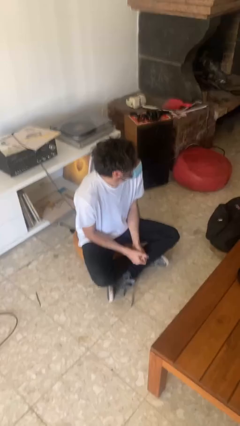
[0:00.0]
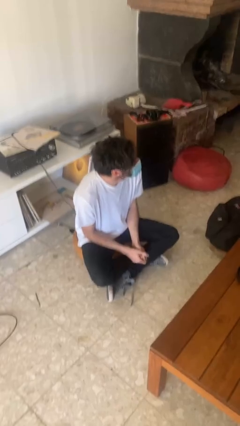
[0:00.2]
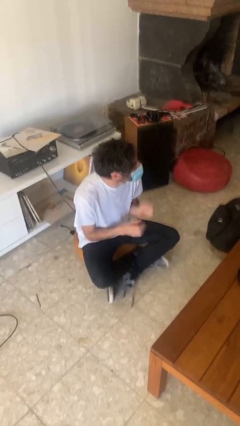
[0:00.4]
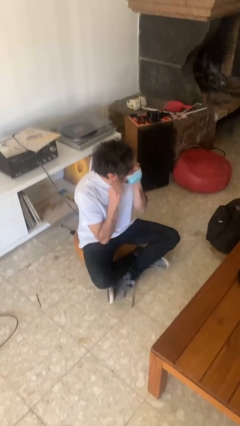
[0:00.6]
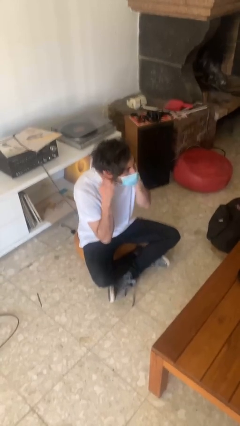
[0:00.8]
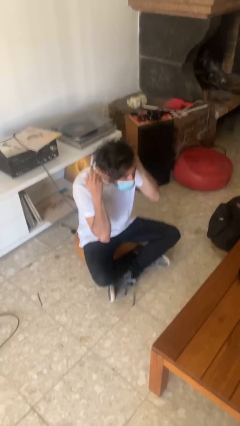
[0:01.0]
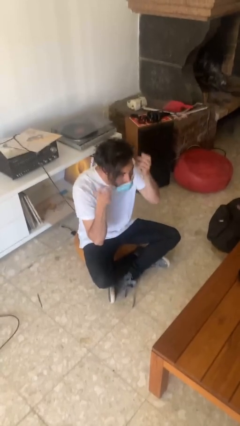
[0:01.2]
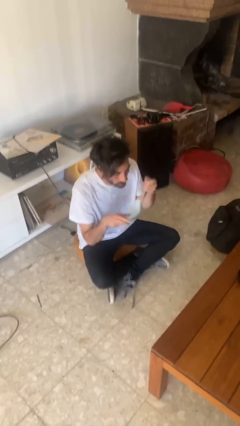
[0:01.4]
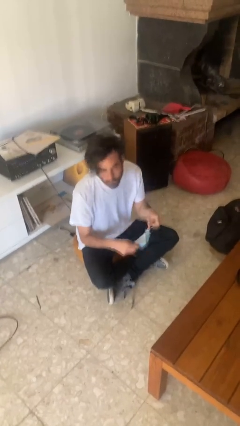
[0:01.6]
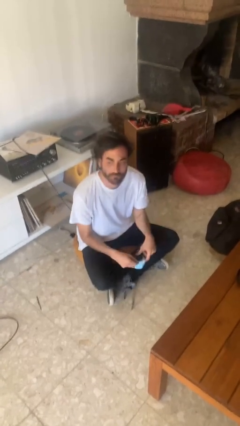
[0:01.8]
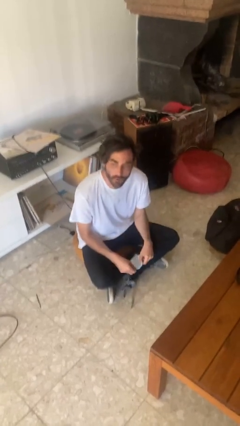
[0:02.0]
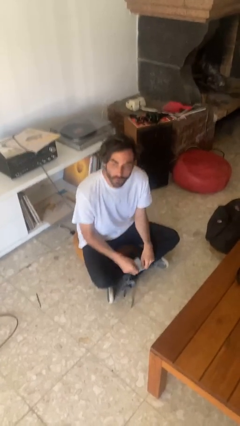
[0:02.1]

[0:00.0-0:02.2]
person takes off facemask

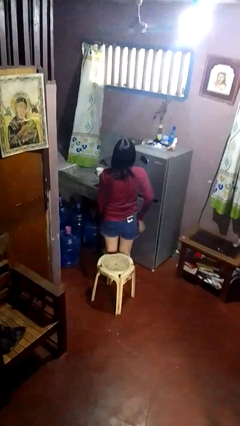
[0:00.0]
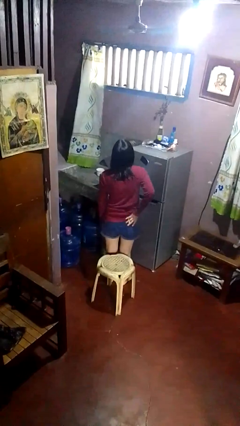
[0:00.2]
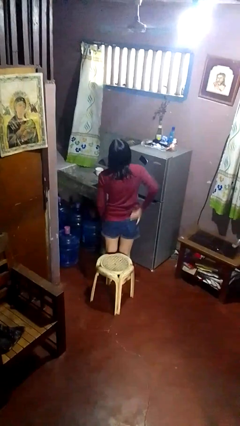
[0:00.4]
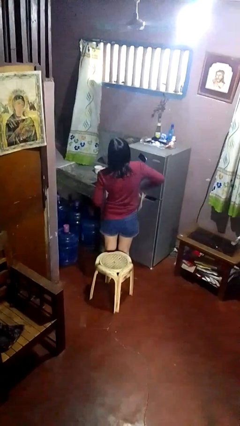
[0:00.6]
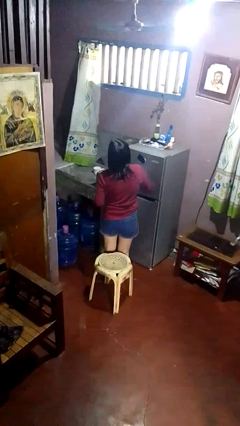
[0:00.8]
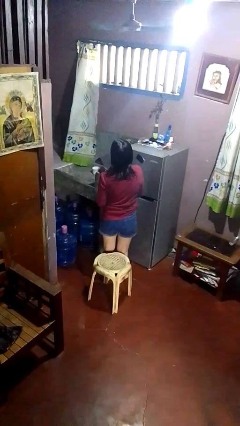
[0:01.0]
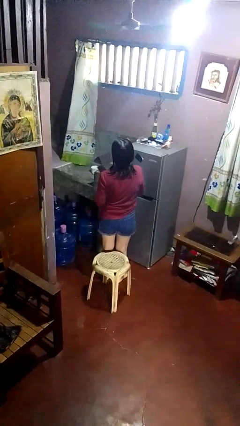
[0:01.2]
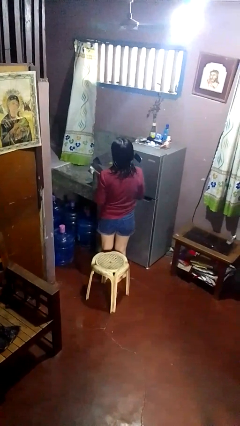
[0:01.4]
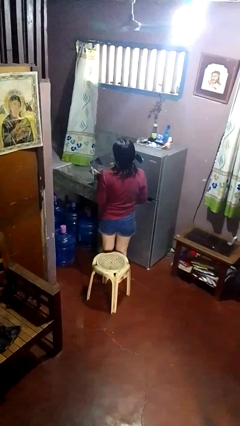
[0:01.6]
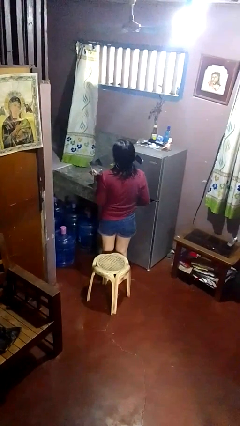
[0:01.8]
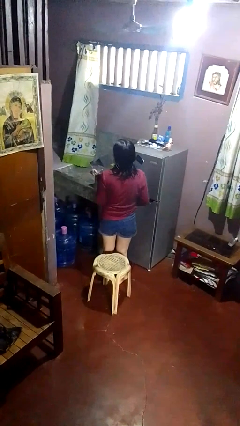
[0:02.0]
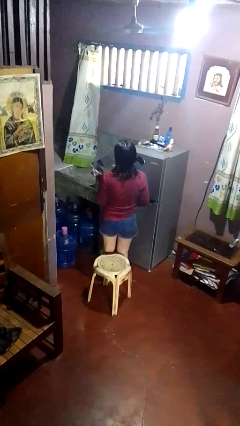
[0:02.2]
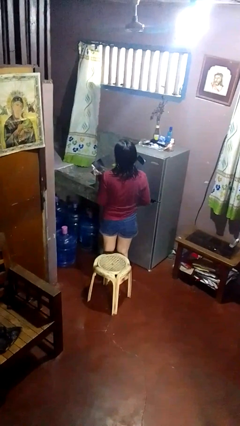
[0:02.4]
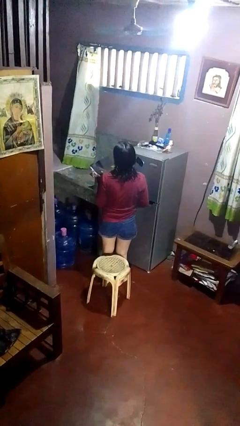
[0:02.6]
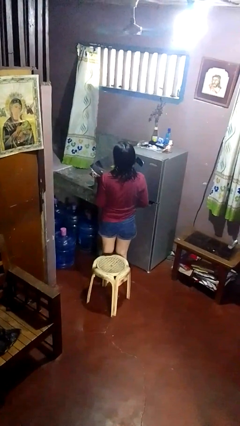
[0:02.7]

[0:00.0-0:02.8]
person takes phone from pocket

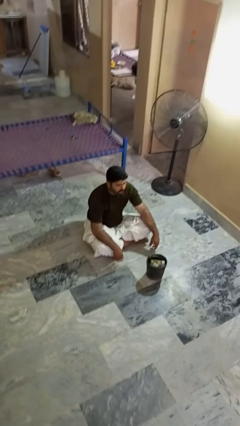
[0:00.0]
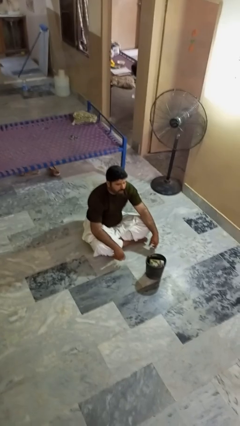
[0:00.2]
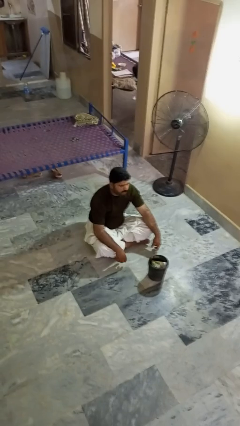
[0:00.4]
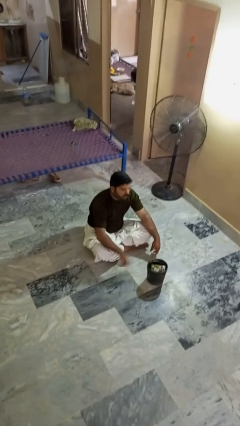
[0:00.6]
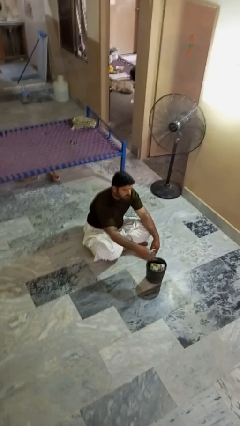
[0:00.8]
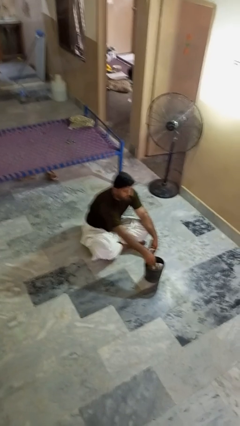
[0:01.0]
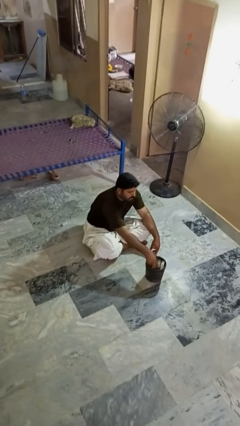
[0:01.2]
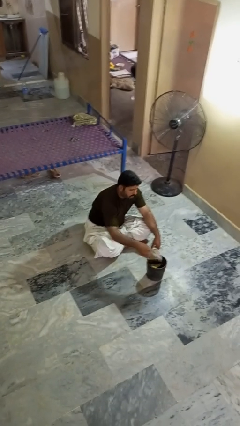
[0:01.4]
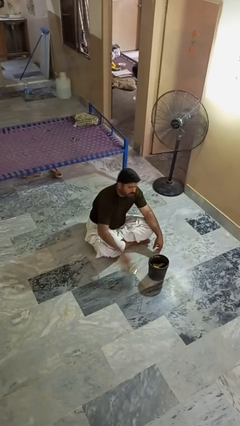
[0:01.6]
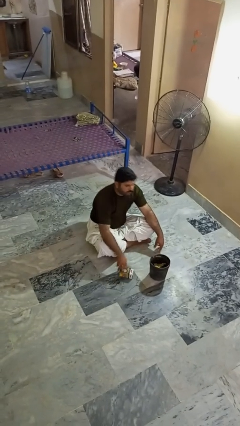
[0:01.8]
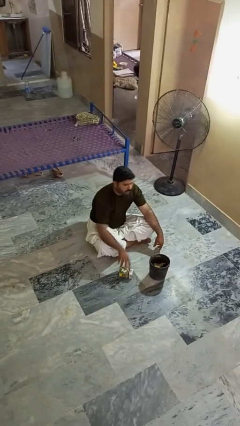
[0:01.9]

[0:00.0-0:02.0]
person takes object from basket

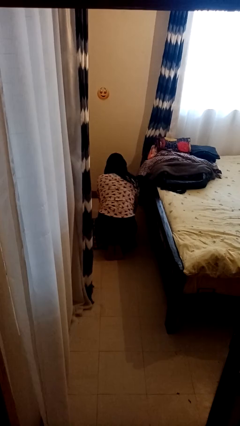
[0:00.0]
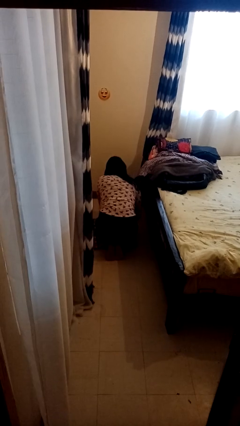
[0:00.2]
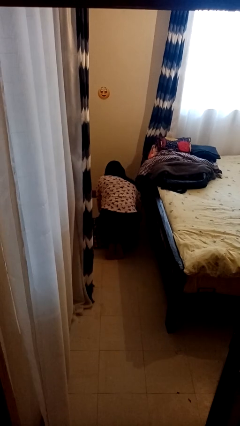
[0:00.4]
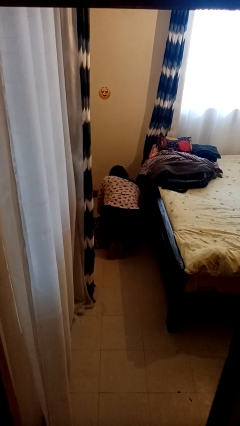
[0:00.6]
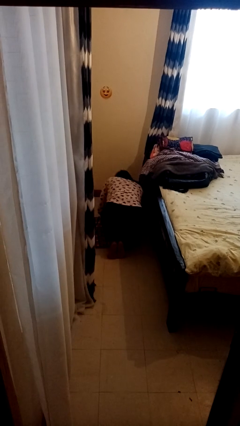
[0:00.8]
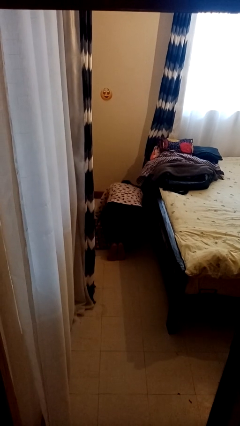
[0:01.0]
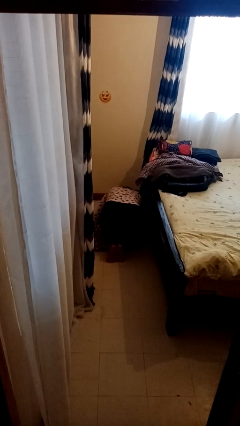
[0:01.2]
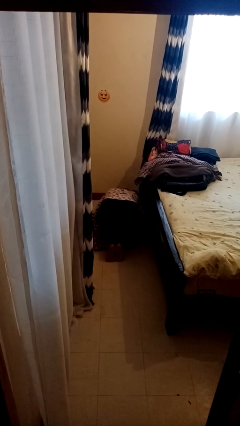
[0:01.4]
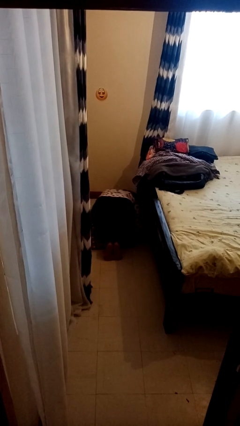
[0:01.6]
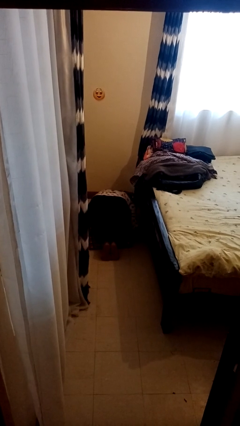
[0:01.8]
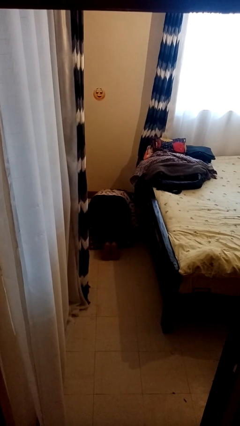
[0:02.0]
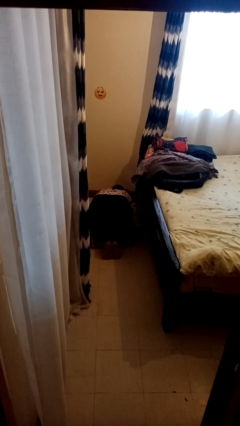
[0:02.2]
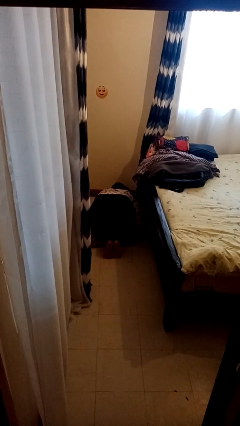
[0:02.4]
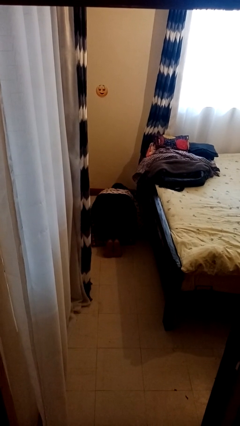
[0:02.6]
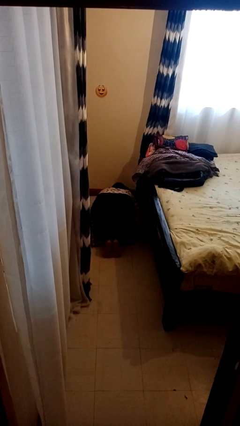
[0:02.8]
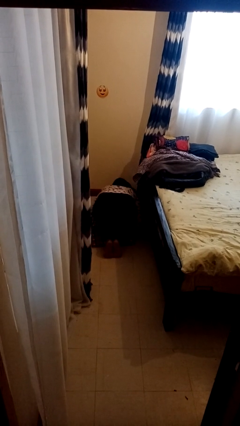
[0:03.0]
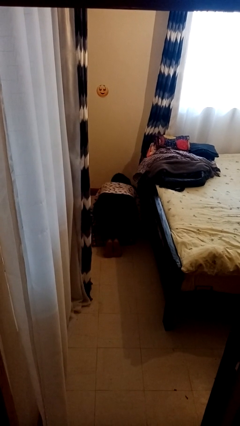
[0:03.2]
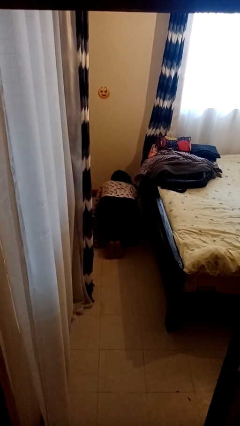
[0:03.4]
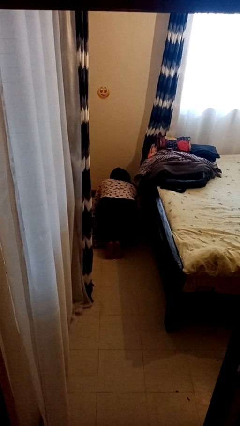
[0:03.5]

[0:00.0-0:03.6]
person searches under bed

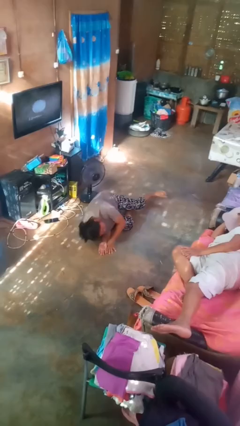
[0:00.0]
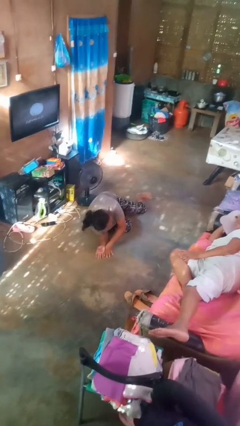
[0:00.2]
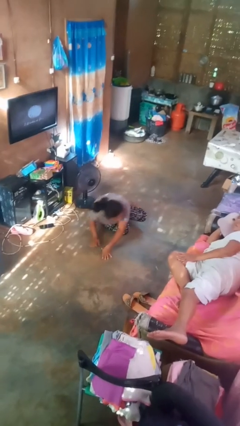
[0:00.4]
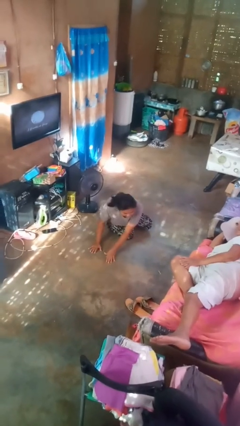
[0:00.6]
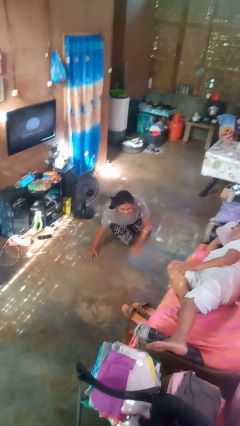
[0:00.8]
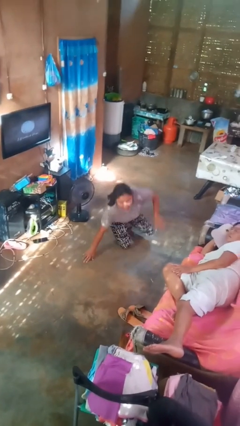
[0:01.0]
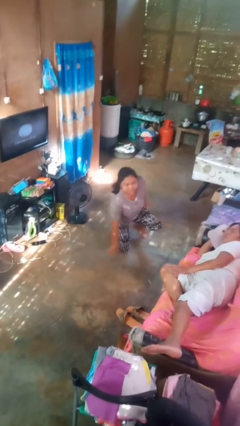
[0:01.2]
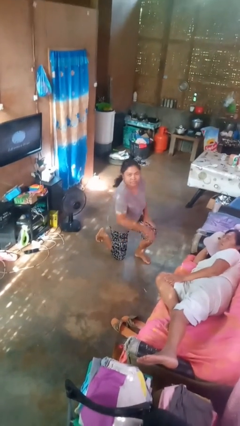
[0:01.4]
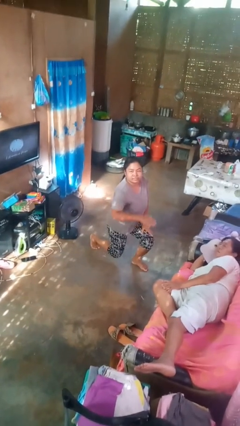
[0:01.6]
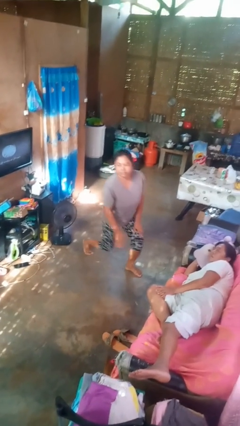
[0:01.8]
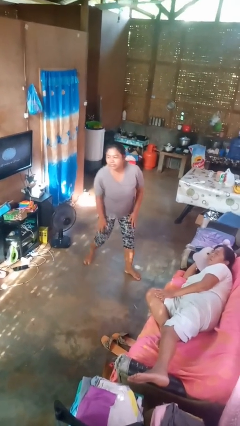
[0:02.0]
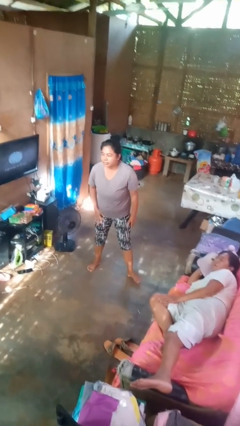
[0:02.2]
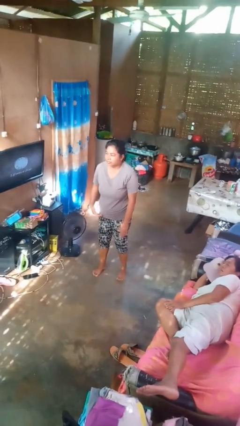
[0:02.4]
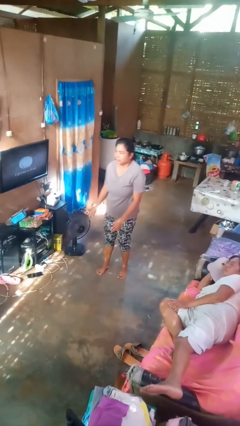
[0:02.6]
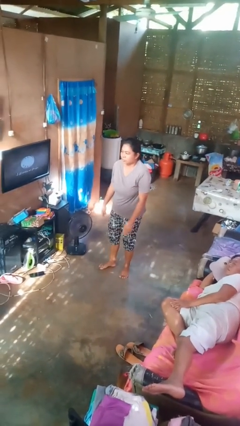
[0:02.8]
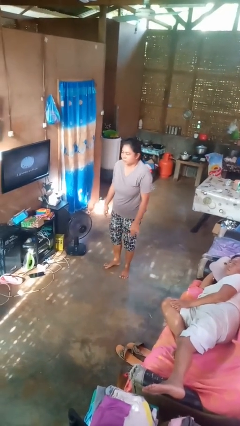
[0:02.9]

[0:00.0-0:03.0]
person stands up from floor

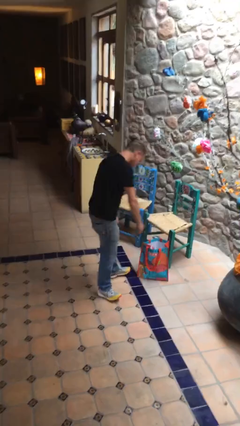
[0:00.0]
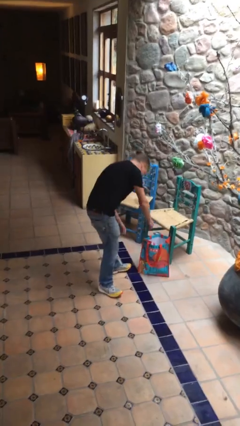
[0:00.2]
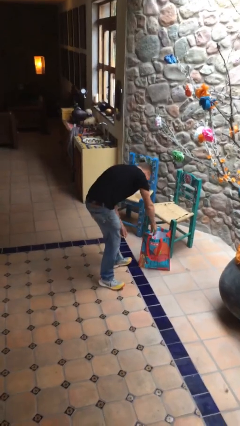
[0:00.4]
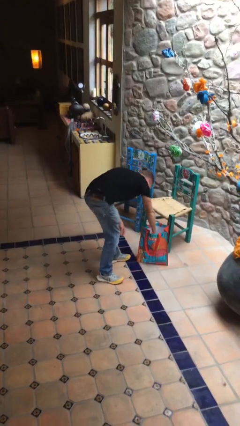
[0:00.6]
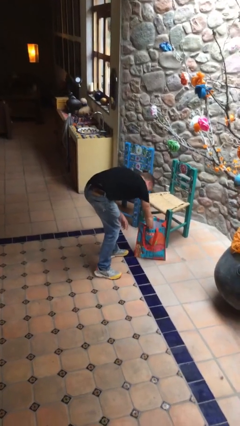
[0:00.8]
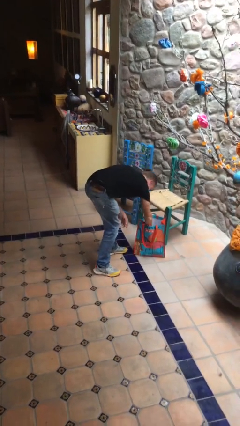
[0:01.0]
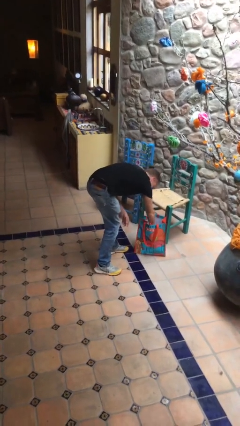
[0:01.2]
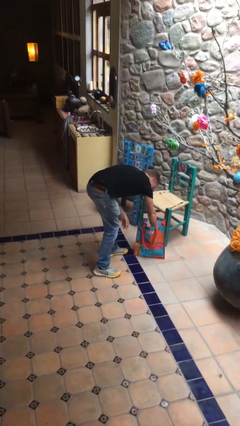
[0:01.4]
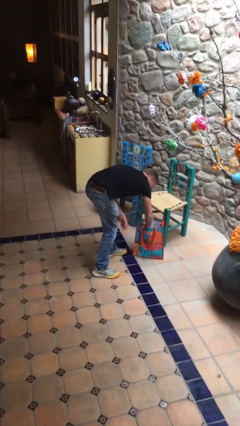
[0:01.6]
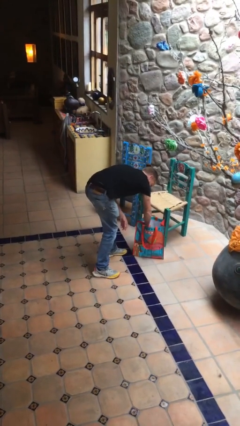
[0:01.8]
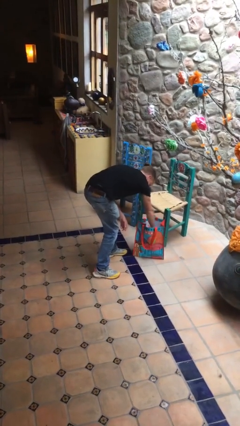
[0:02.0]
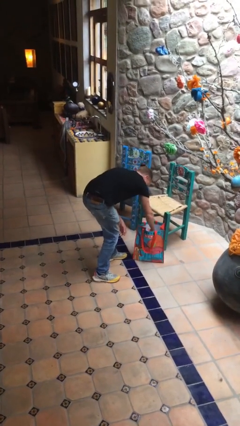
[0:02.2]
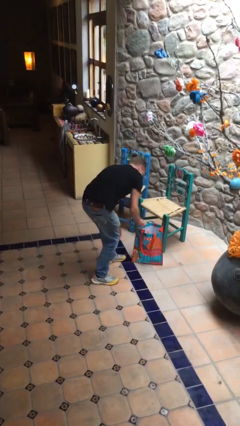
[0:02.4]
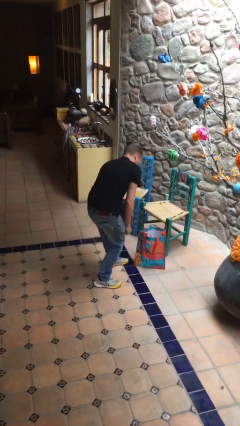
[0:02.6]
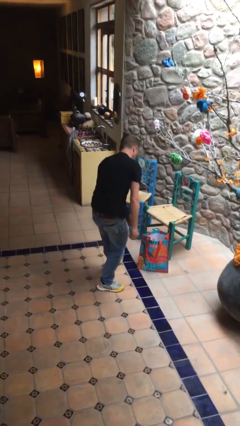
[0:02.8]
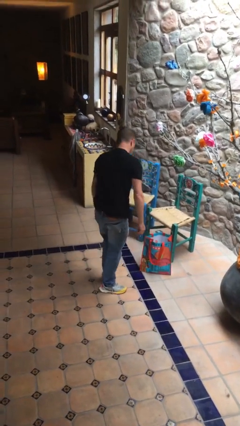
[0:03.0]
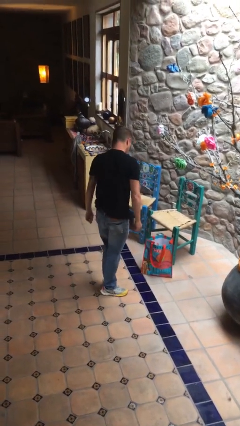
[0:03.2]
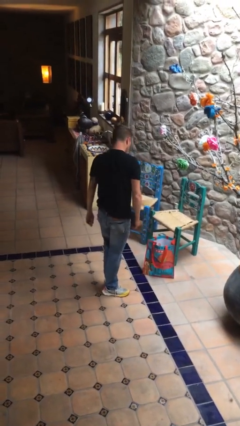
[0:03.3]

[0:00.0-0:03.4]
person searches in bag

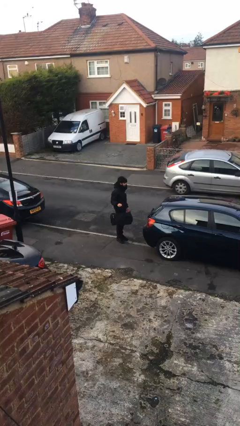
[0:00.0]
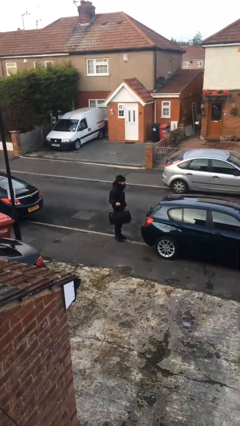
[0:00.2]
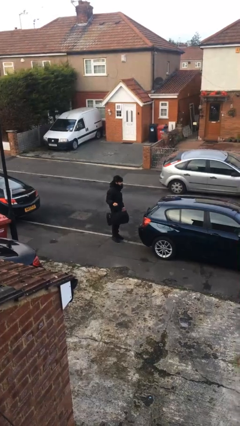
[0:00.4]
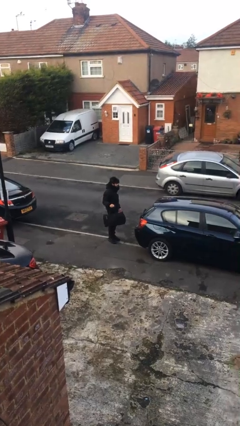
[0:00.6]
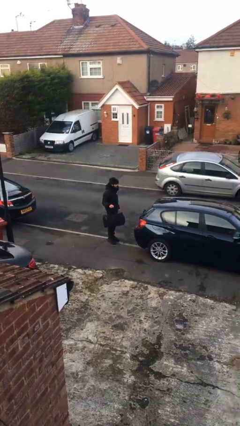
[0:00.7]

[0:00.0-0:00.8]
person loads car
